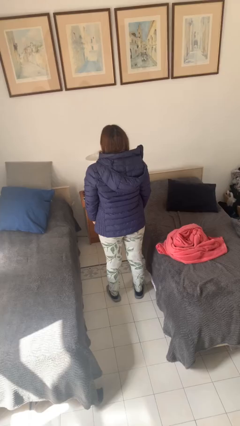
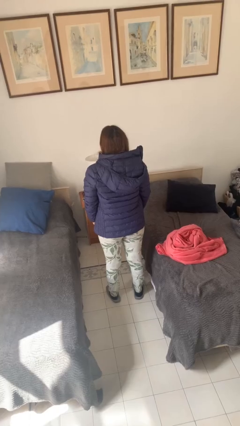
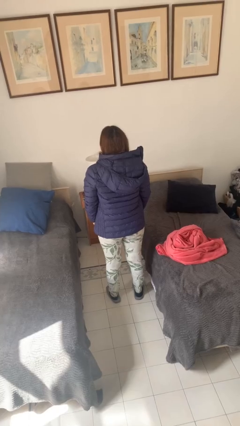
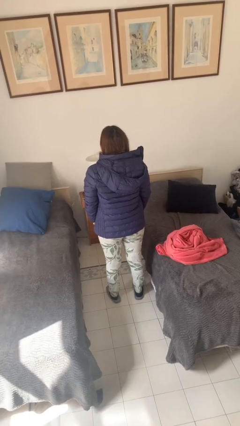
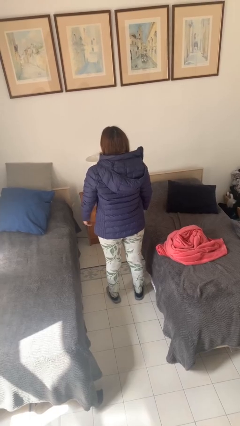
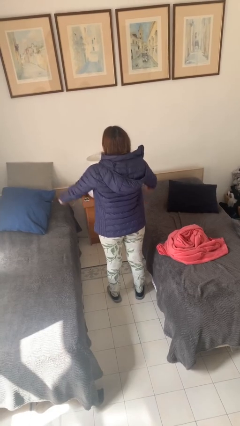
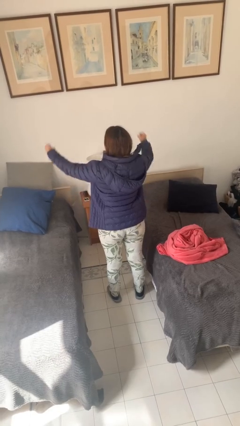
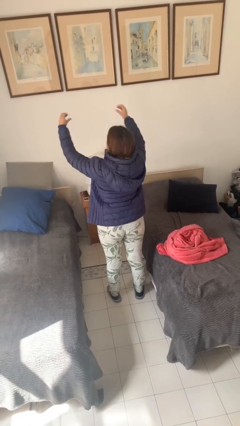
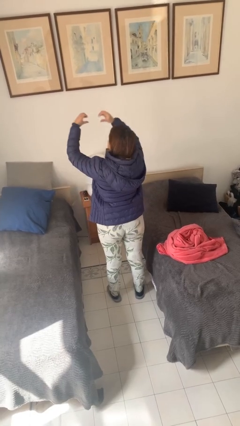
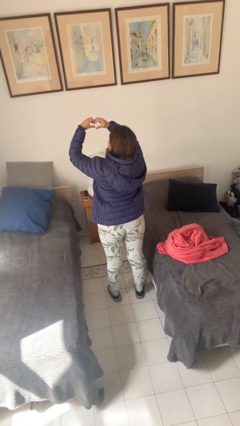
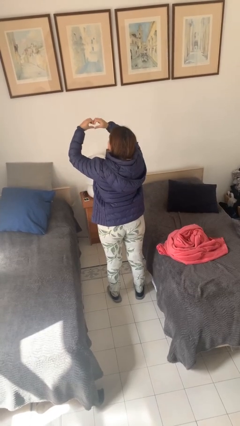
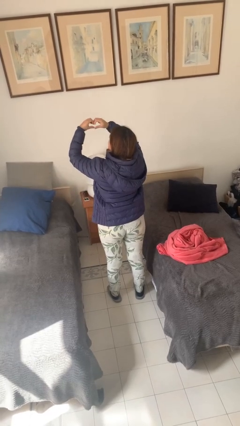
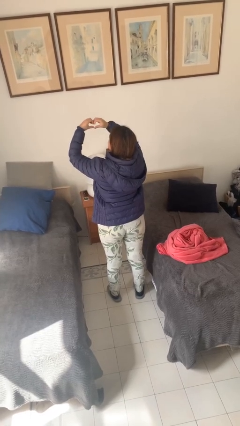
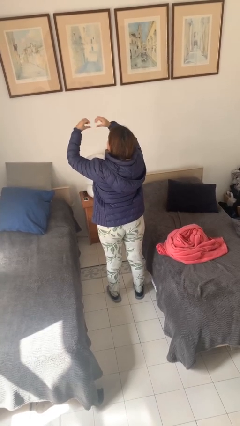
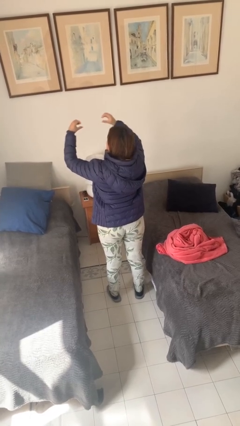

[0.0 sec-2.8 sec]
person gestures heart

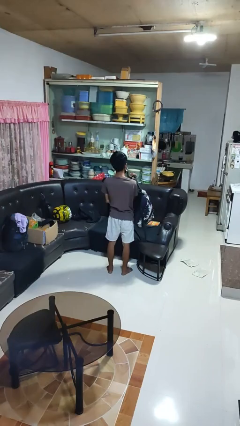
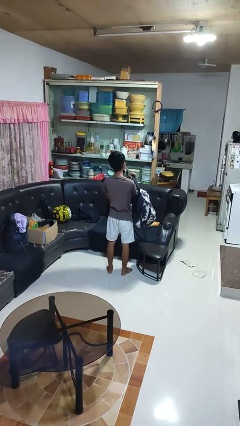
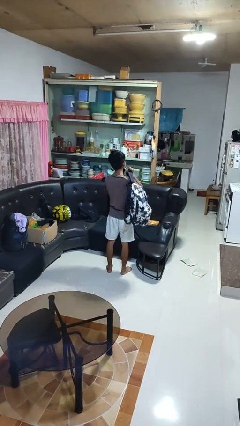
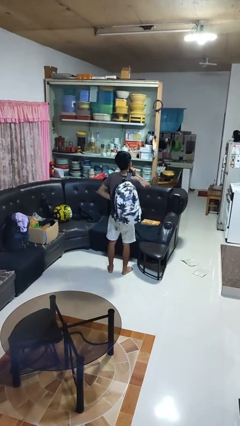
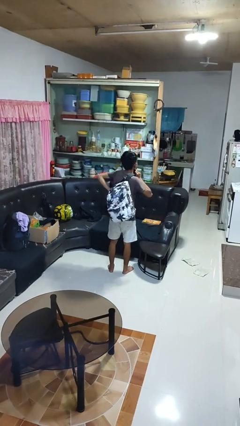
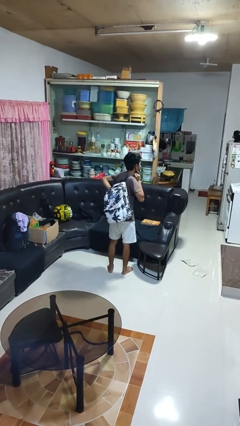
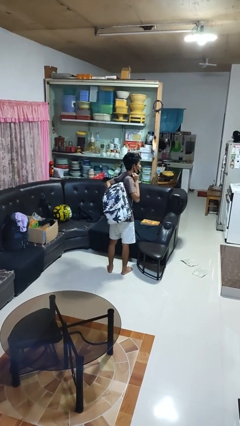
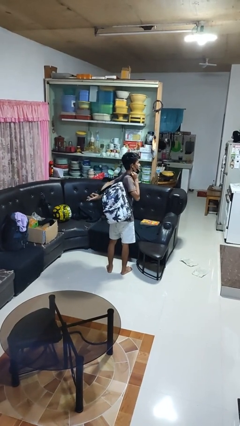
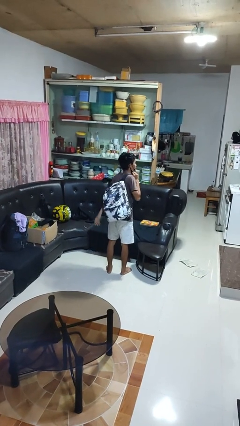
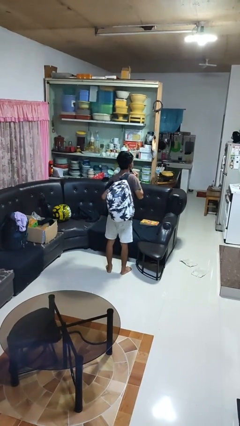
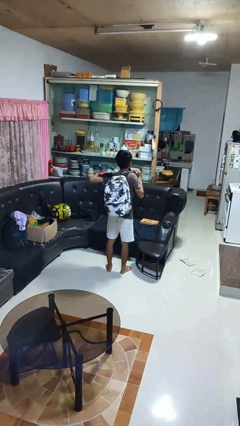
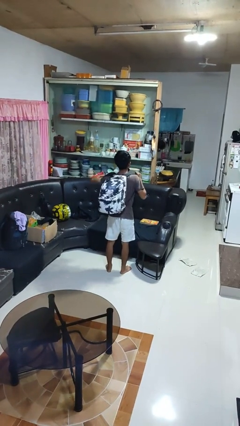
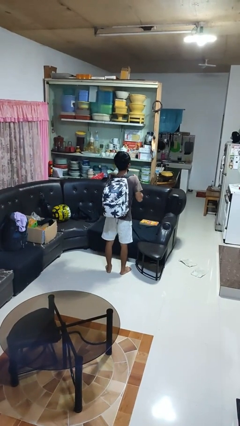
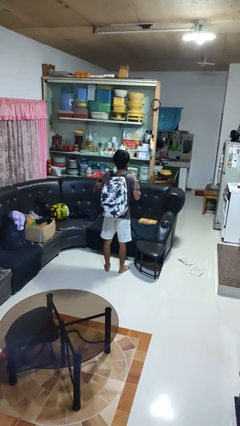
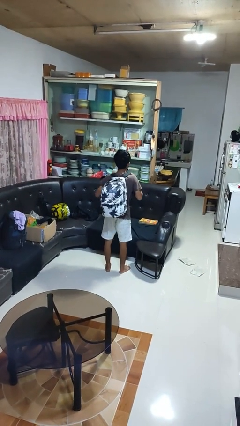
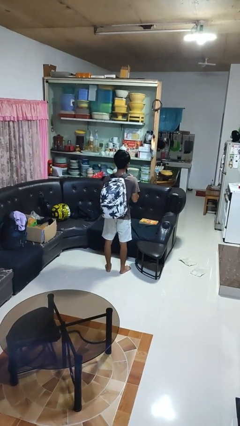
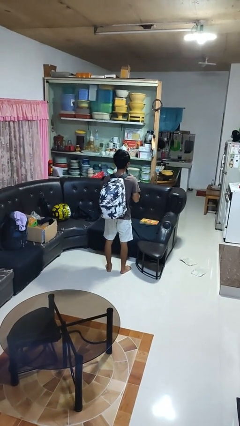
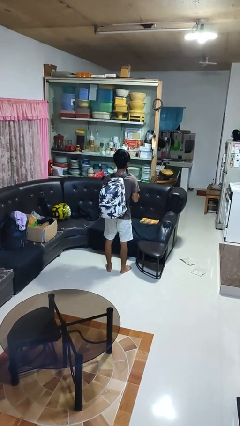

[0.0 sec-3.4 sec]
person puts on backpack

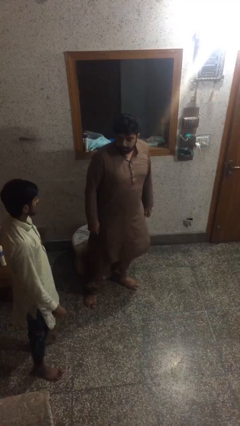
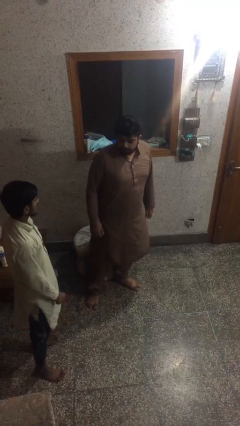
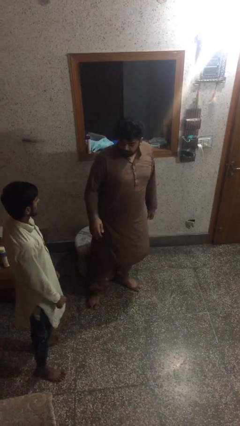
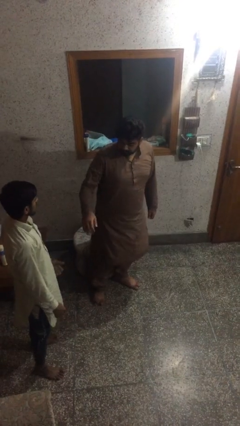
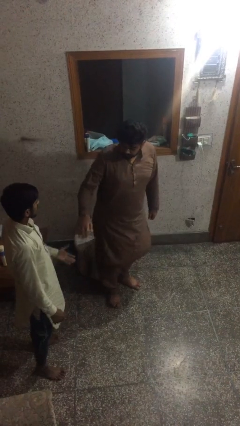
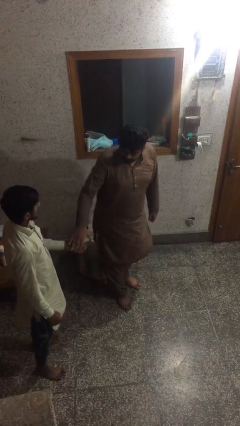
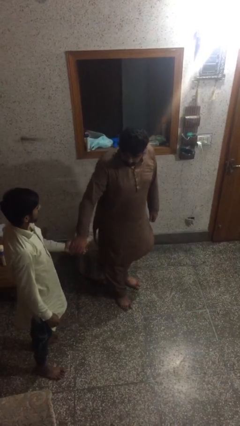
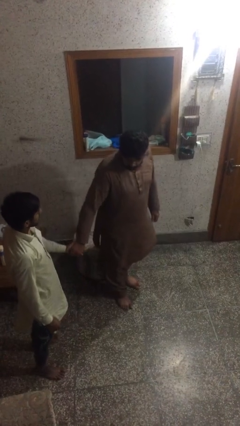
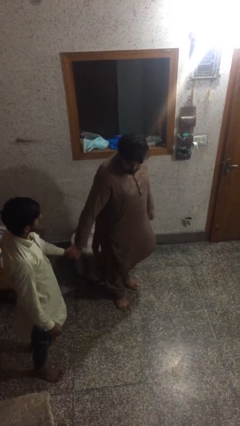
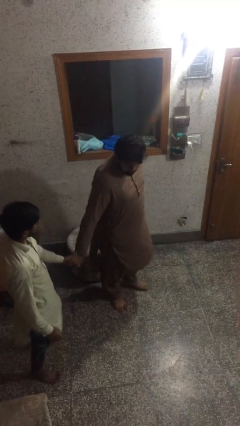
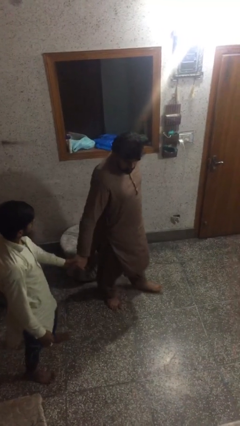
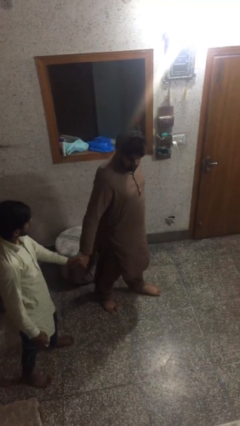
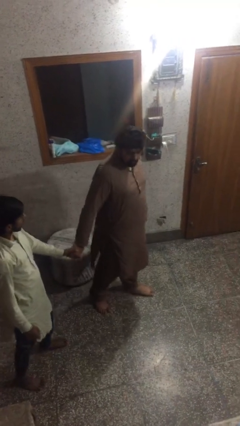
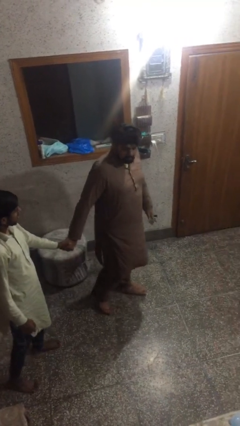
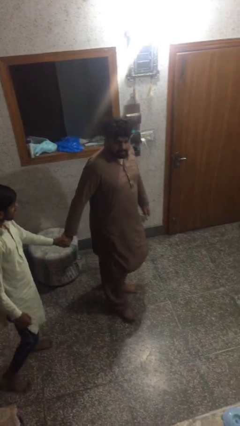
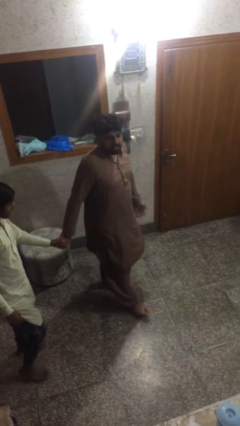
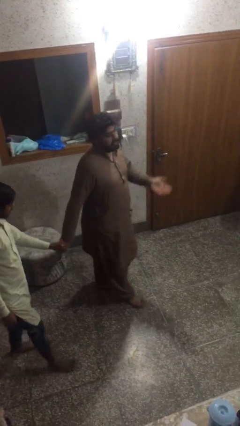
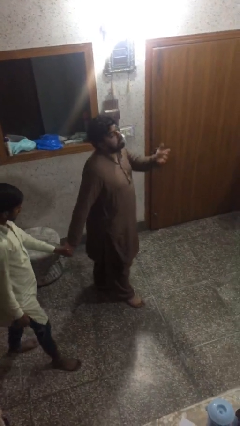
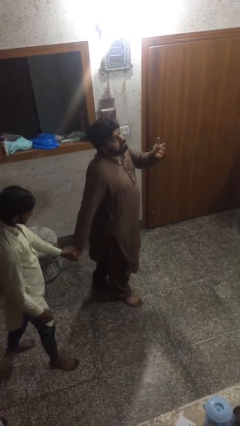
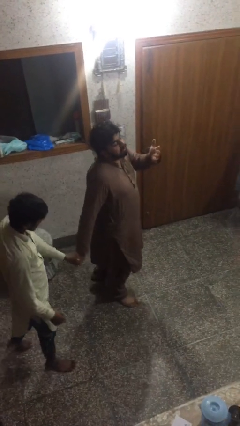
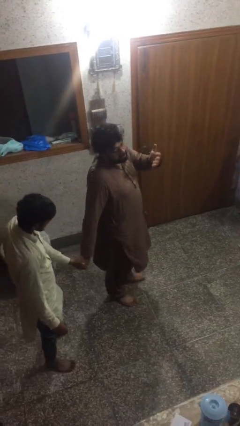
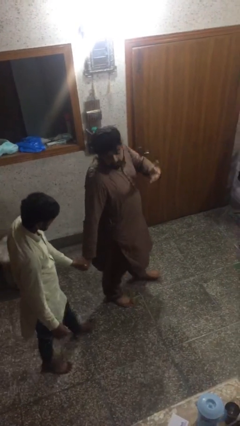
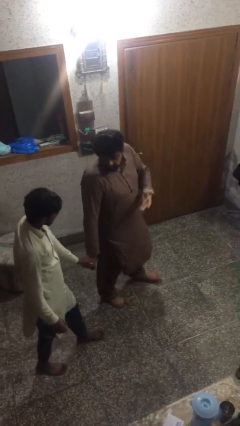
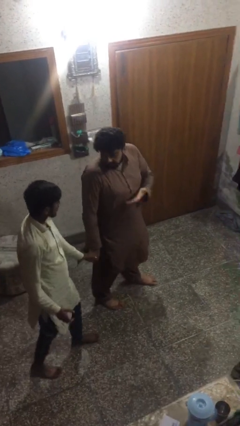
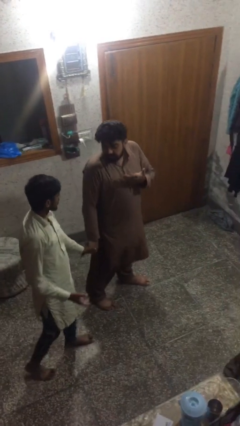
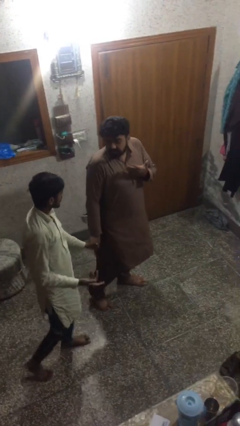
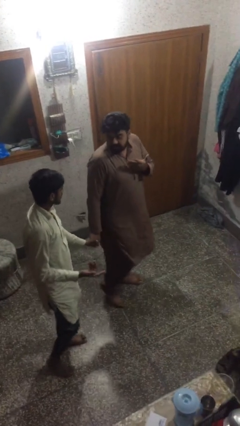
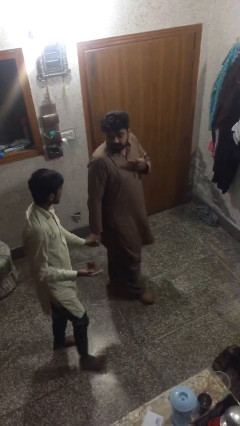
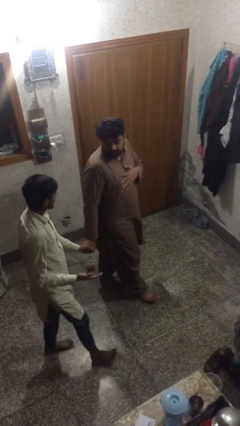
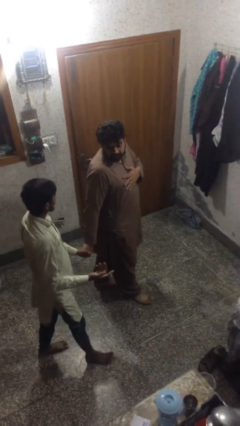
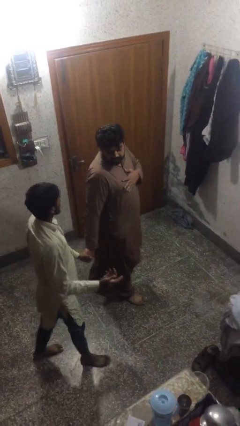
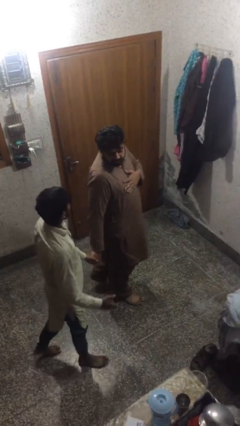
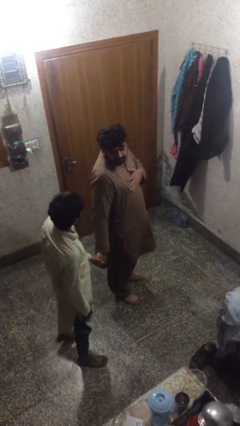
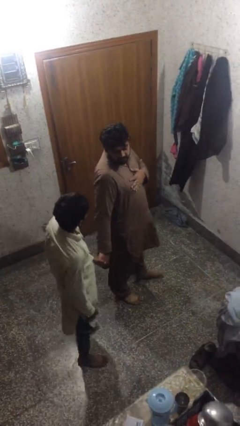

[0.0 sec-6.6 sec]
person holds hand

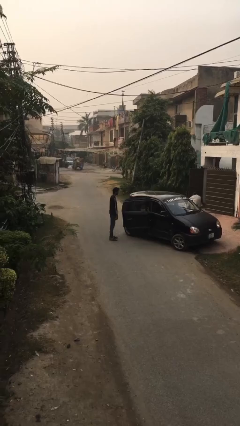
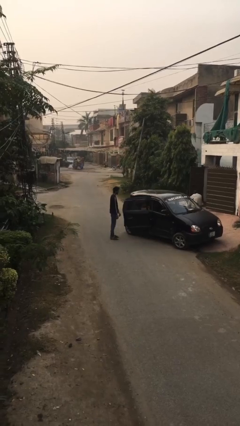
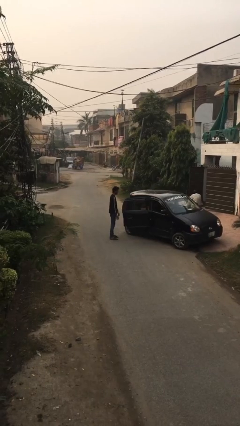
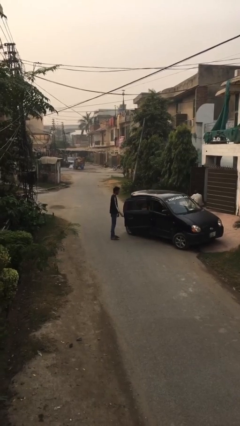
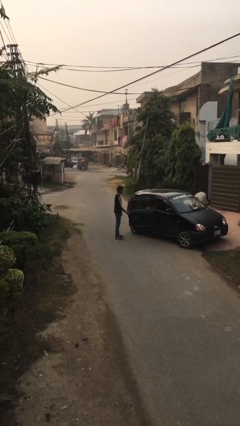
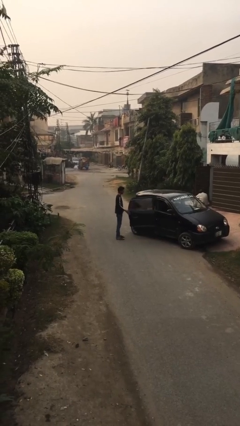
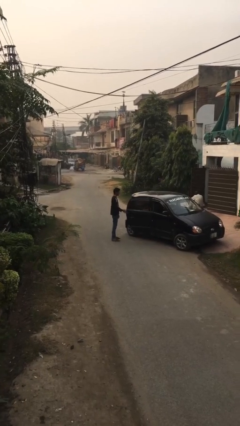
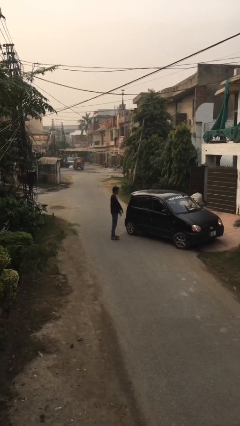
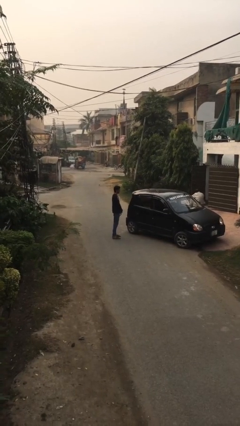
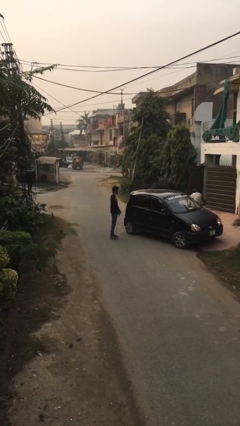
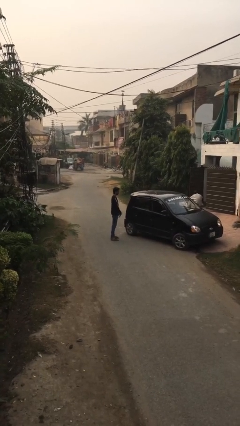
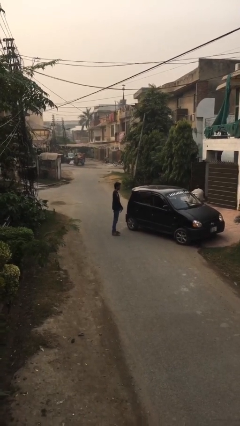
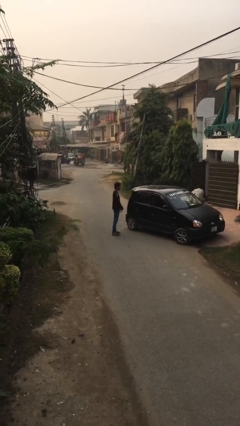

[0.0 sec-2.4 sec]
person closes car door

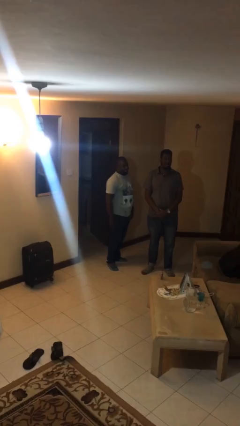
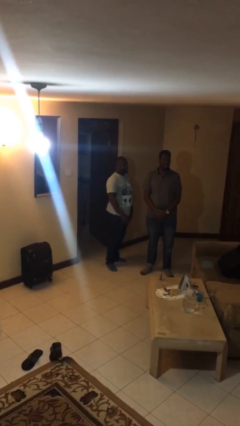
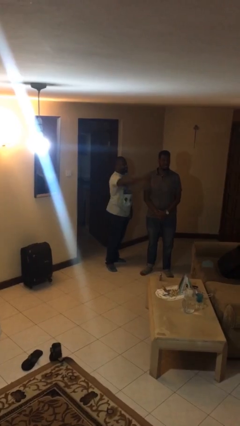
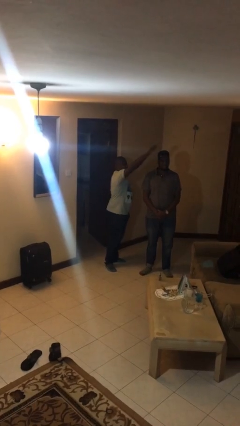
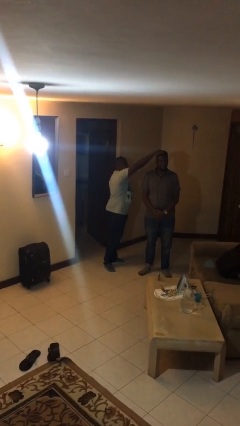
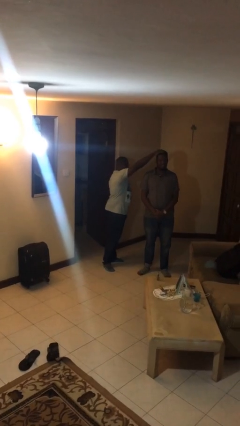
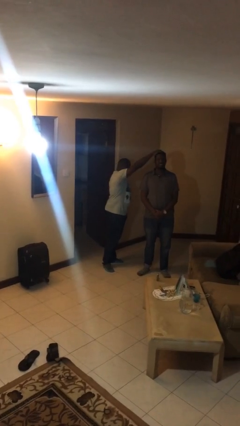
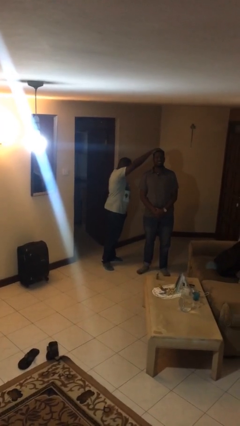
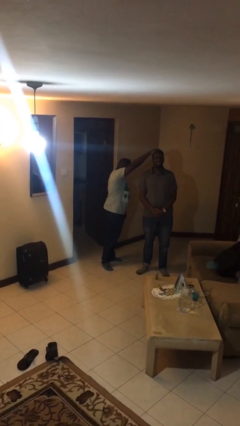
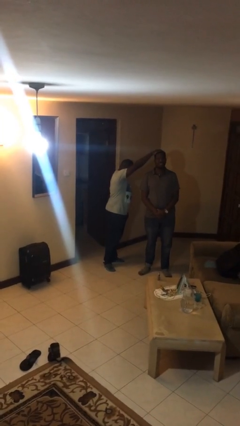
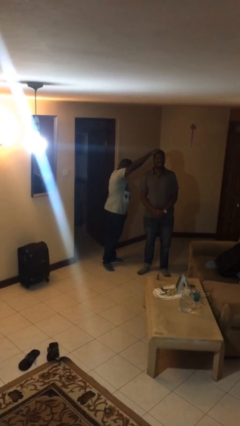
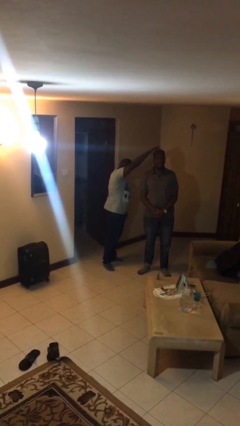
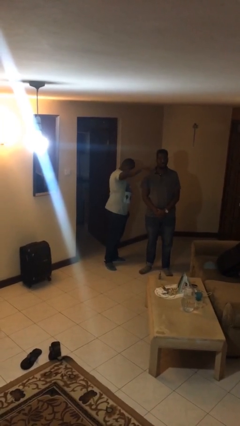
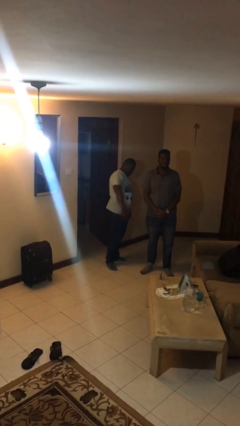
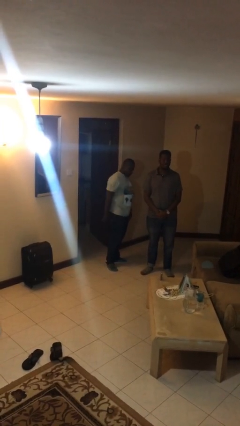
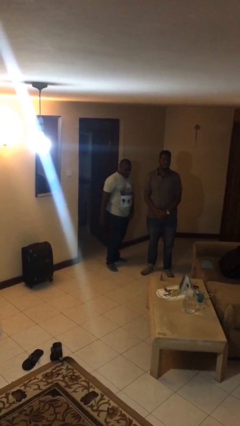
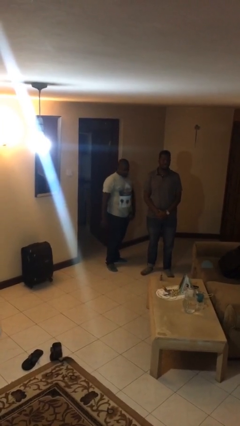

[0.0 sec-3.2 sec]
person grabs person by hair
